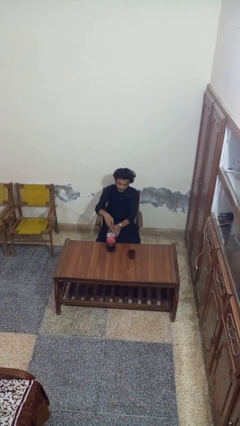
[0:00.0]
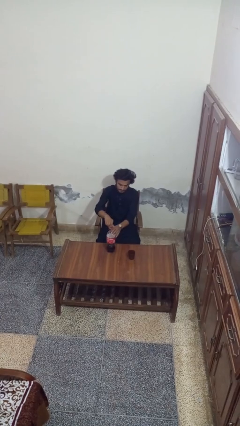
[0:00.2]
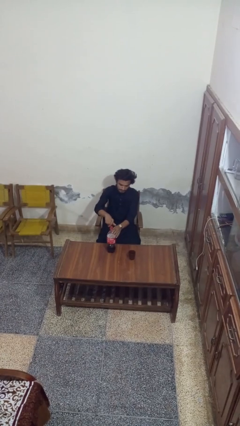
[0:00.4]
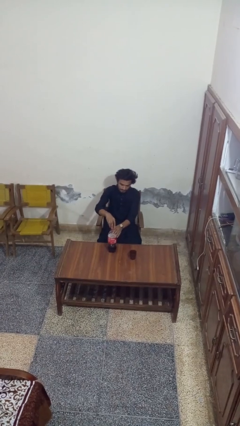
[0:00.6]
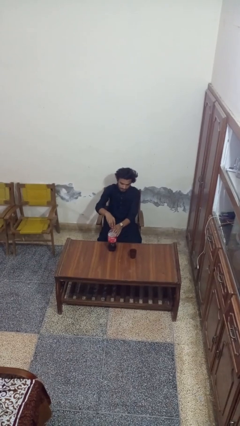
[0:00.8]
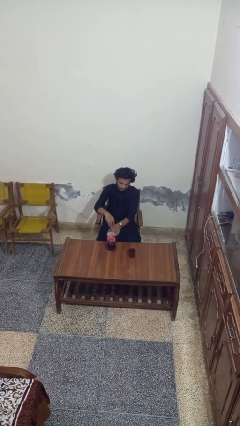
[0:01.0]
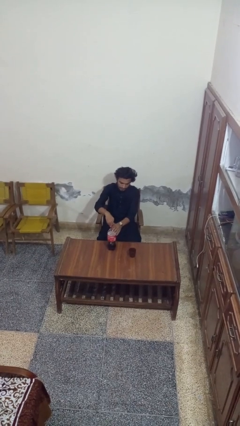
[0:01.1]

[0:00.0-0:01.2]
person screws lid to bottle

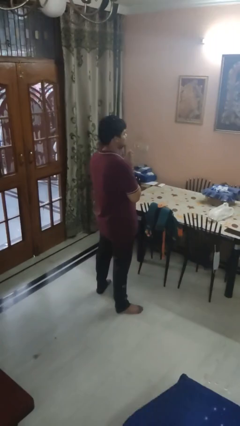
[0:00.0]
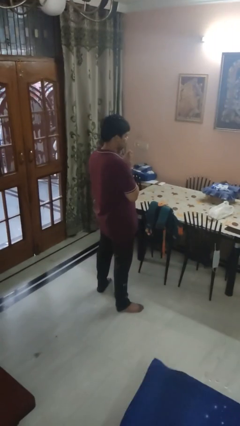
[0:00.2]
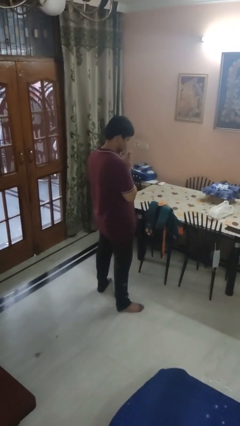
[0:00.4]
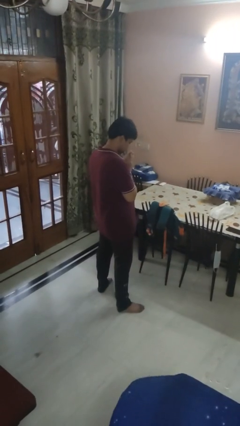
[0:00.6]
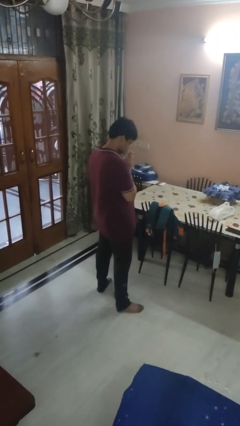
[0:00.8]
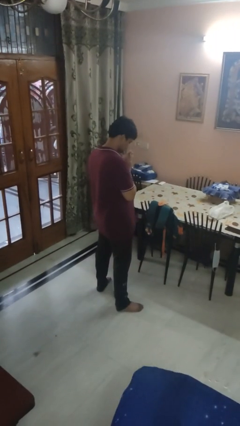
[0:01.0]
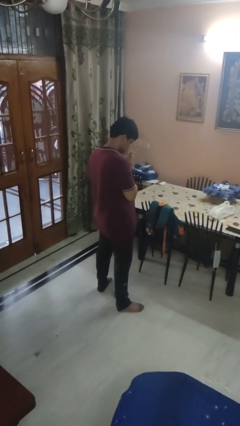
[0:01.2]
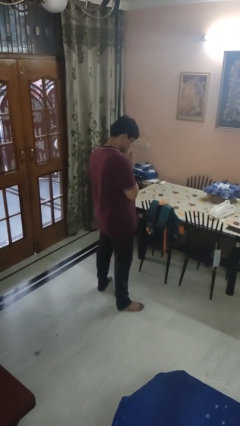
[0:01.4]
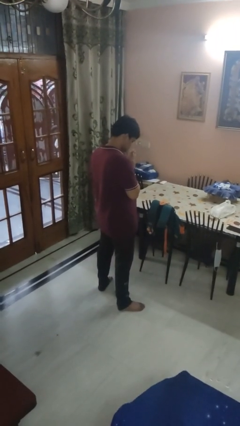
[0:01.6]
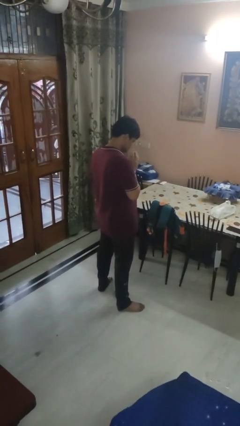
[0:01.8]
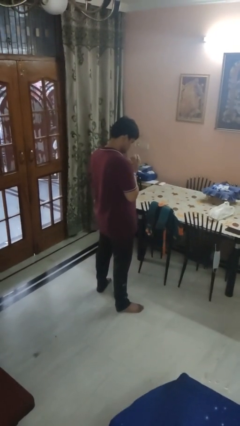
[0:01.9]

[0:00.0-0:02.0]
person prays

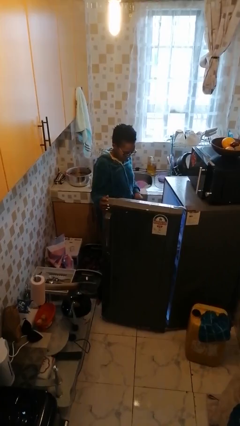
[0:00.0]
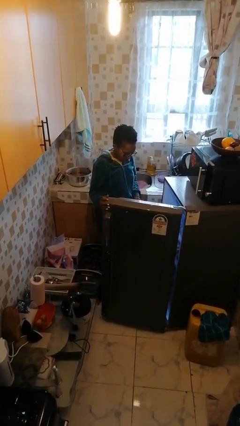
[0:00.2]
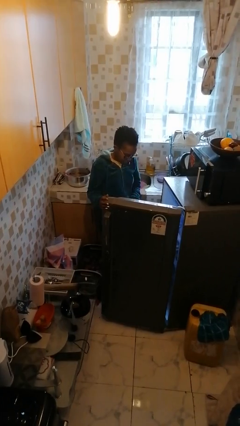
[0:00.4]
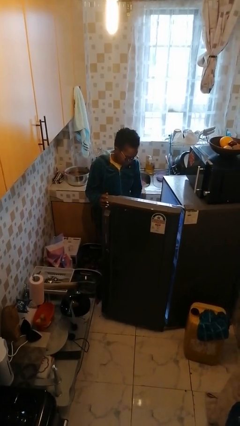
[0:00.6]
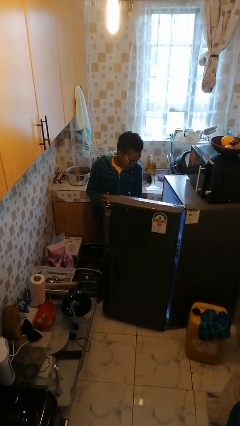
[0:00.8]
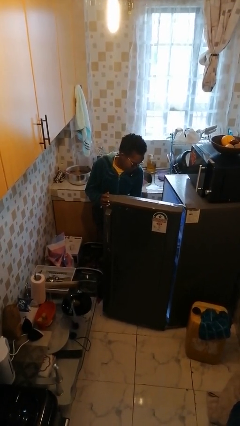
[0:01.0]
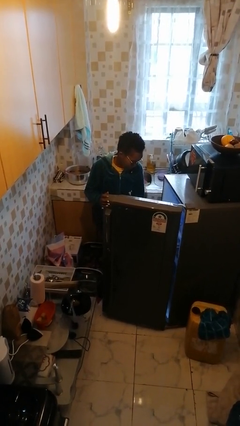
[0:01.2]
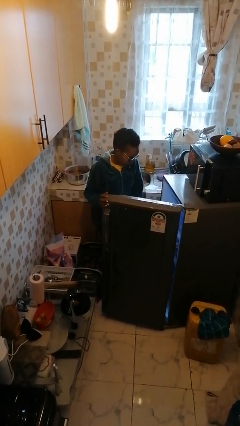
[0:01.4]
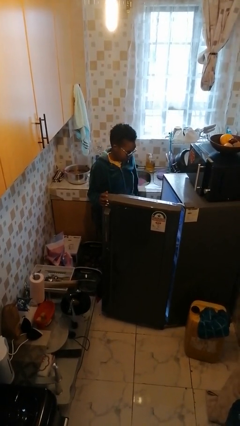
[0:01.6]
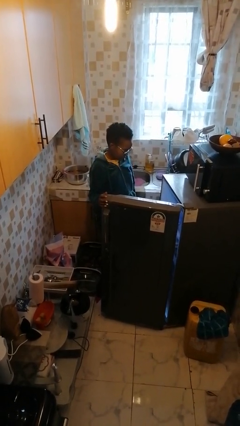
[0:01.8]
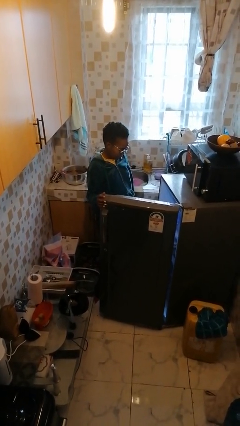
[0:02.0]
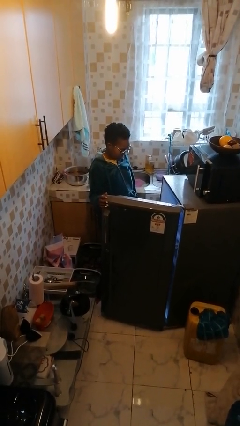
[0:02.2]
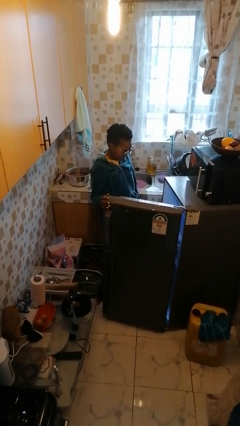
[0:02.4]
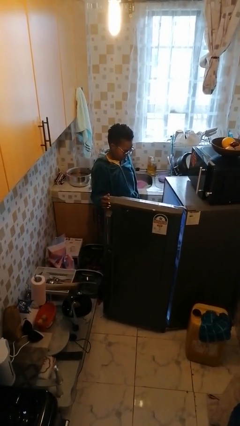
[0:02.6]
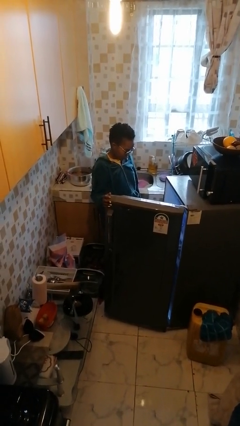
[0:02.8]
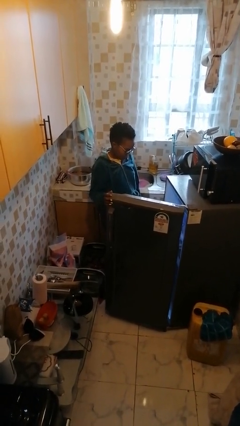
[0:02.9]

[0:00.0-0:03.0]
person puts object into refrigerator

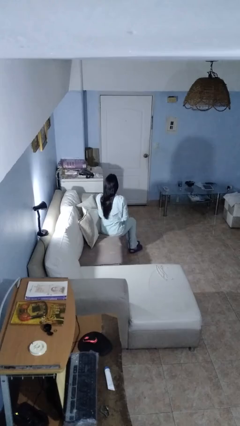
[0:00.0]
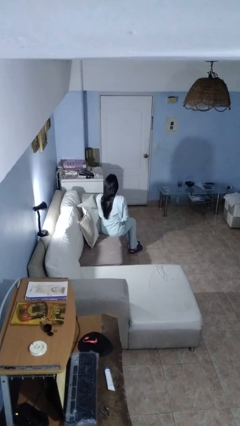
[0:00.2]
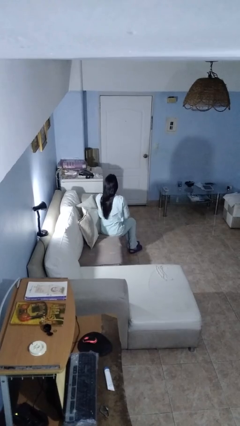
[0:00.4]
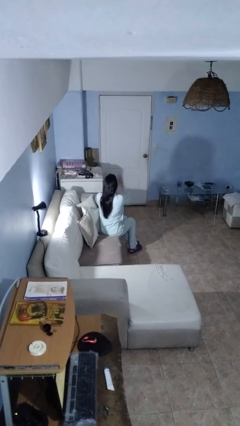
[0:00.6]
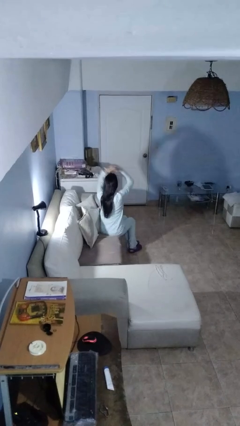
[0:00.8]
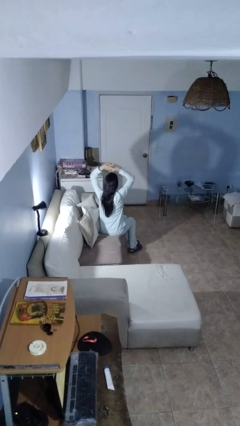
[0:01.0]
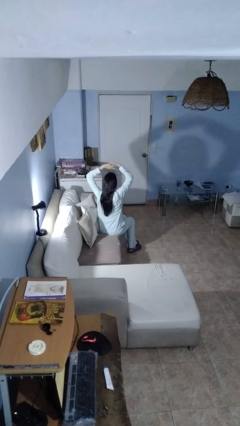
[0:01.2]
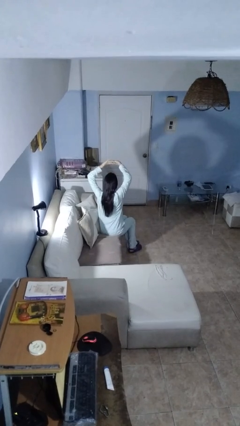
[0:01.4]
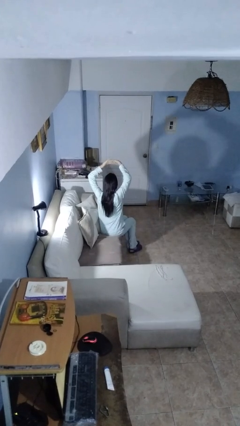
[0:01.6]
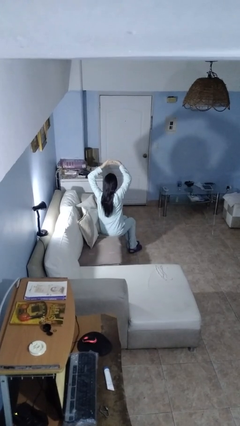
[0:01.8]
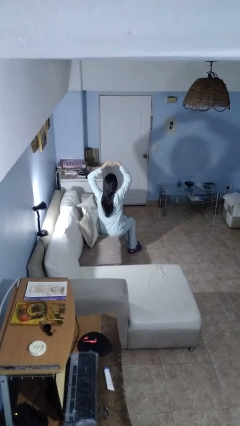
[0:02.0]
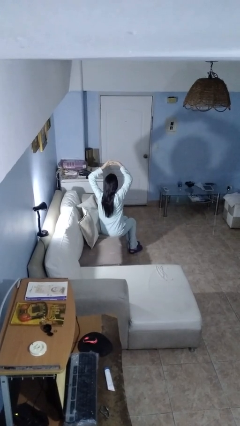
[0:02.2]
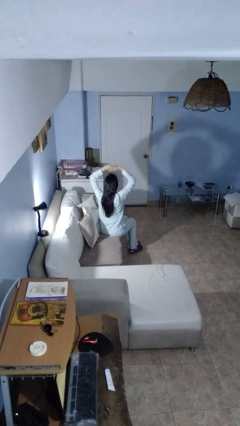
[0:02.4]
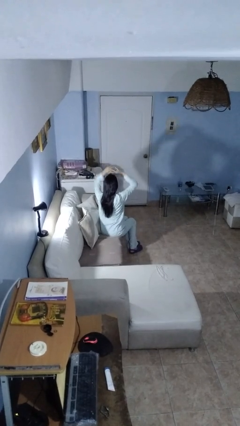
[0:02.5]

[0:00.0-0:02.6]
person snaps fingers

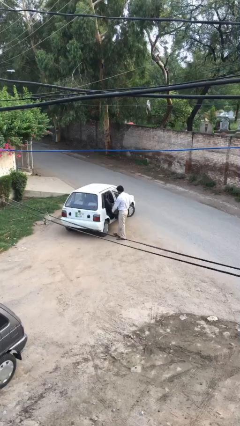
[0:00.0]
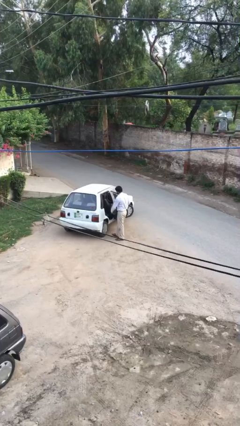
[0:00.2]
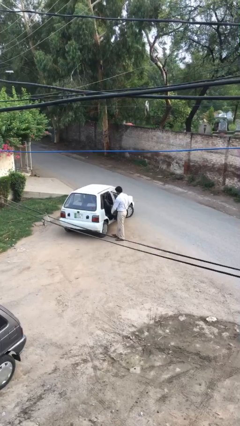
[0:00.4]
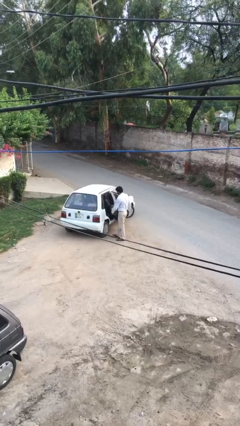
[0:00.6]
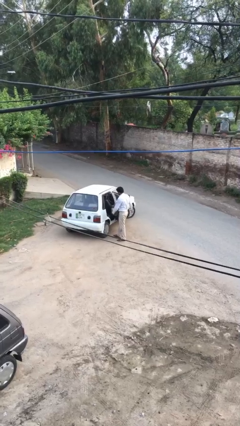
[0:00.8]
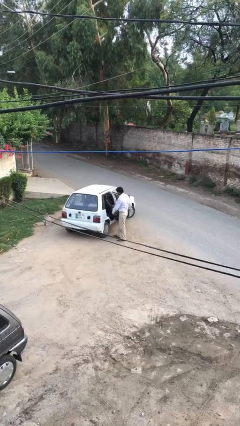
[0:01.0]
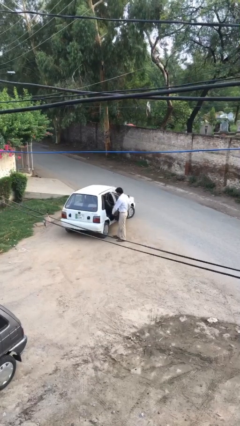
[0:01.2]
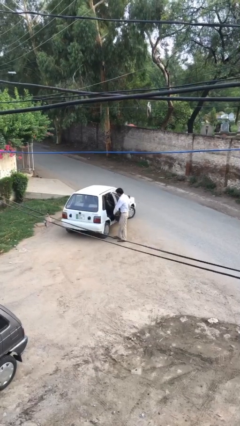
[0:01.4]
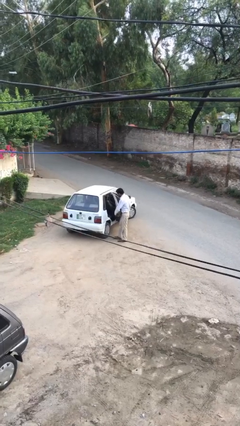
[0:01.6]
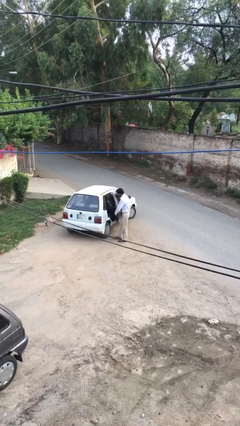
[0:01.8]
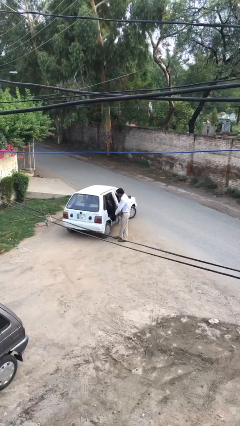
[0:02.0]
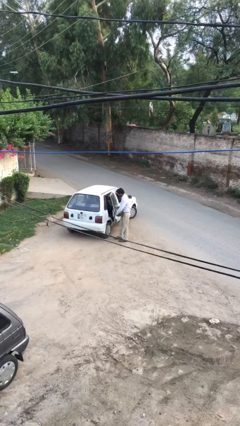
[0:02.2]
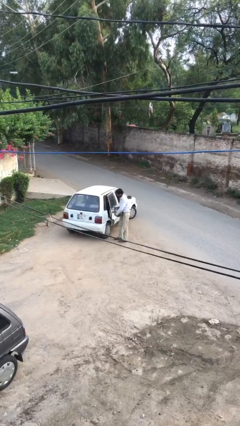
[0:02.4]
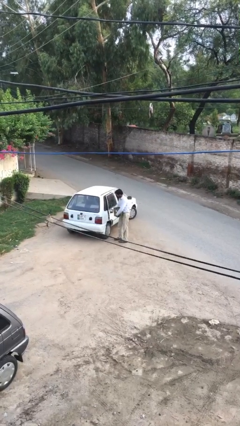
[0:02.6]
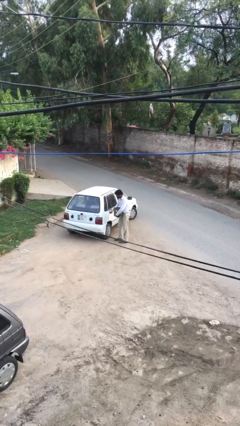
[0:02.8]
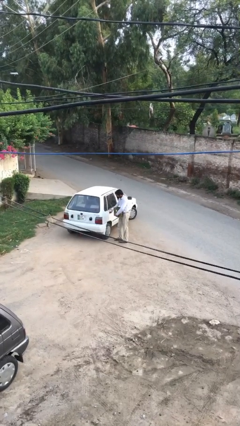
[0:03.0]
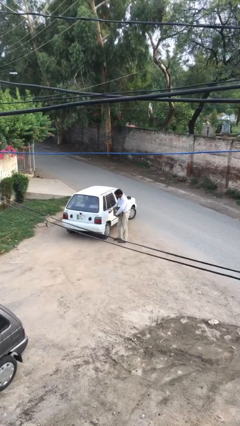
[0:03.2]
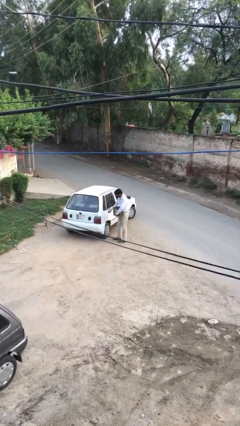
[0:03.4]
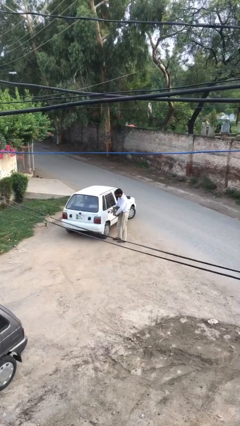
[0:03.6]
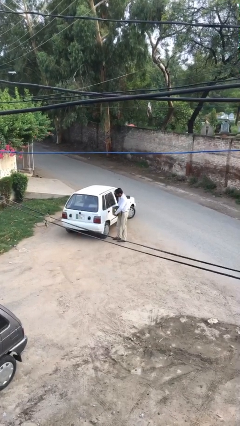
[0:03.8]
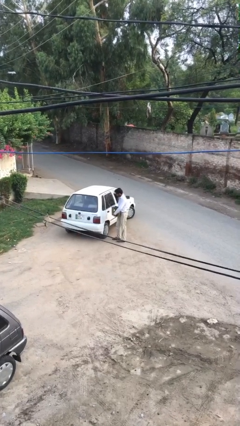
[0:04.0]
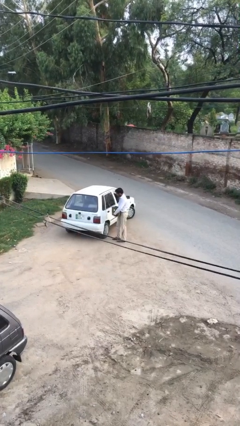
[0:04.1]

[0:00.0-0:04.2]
person closes car door

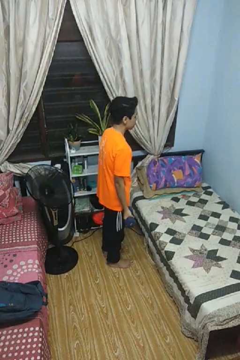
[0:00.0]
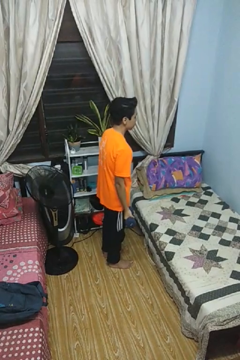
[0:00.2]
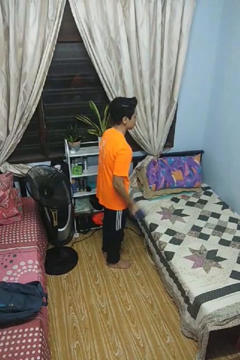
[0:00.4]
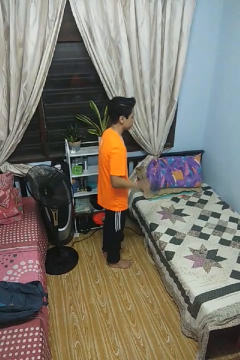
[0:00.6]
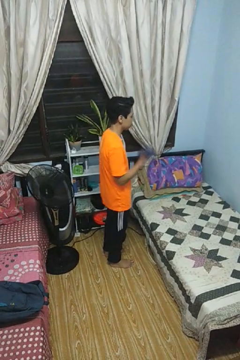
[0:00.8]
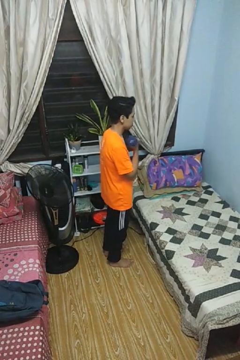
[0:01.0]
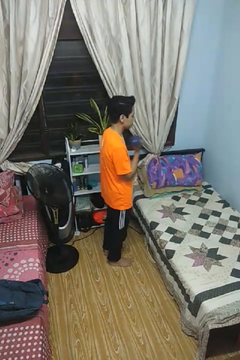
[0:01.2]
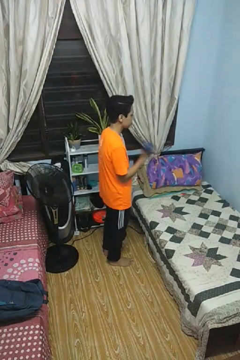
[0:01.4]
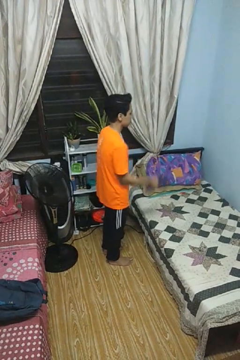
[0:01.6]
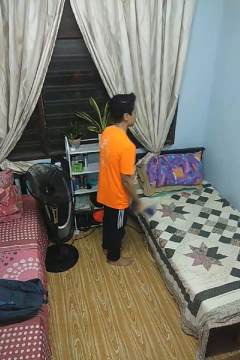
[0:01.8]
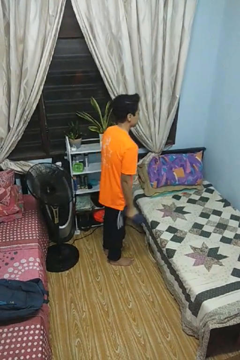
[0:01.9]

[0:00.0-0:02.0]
person lifts dumbbells

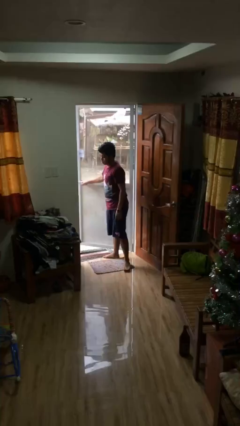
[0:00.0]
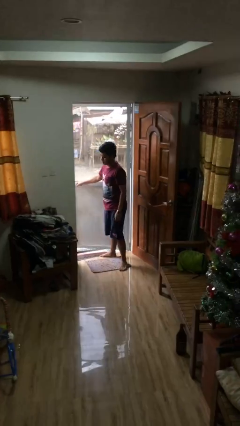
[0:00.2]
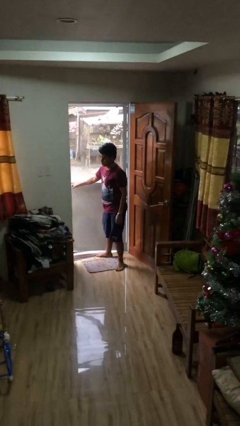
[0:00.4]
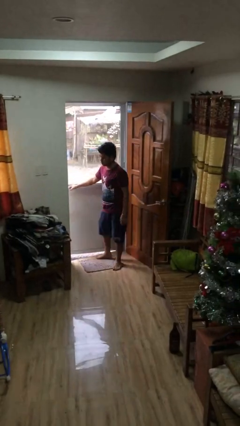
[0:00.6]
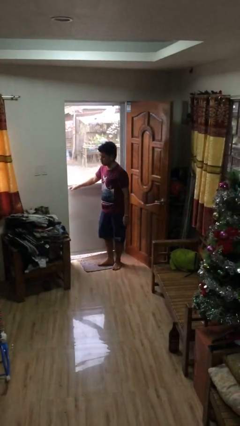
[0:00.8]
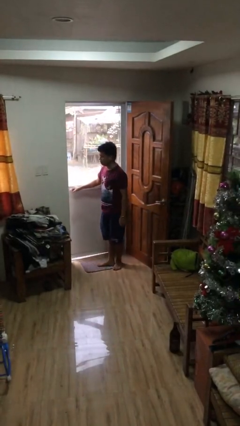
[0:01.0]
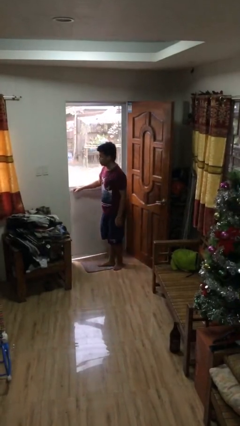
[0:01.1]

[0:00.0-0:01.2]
person closes facility door

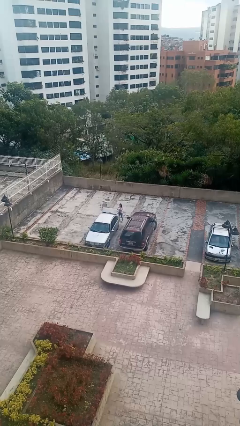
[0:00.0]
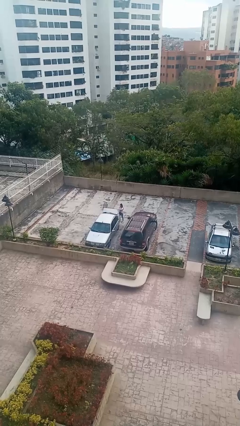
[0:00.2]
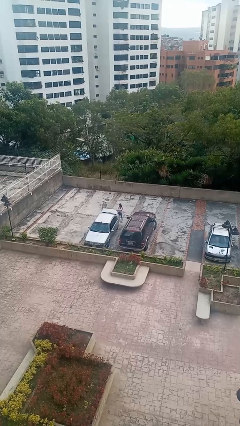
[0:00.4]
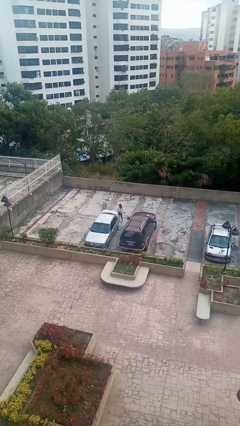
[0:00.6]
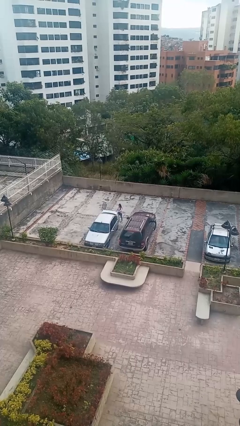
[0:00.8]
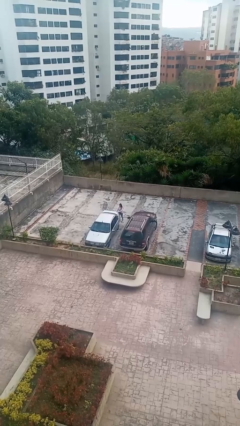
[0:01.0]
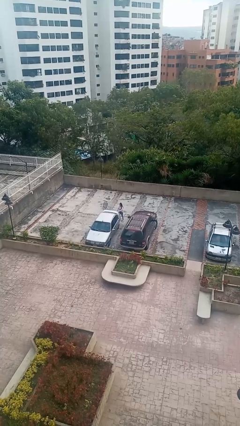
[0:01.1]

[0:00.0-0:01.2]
person closes car trunk
